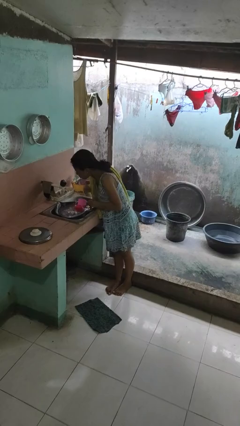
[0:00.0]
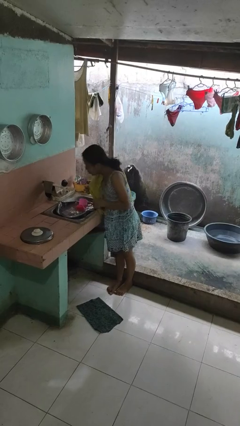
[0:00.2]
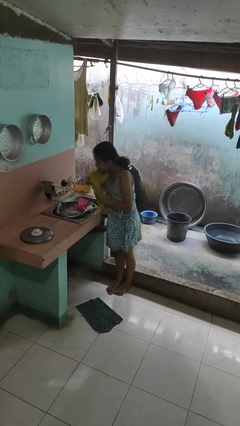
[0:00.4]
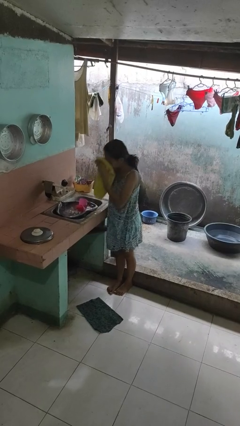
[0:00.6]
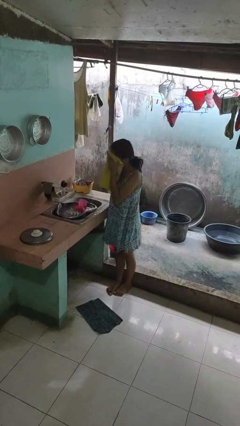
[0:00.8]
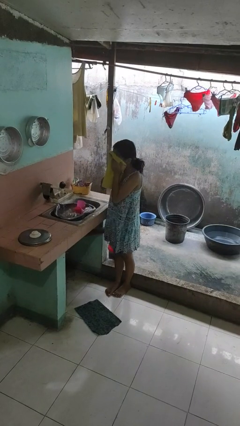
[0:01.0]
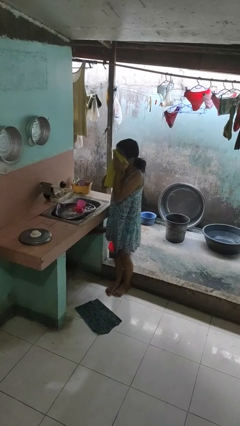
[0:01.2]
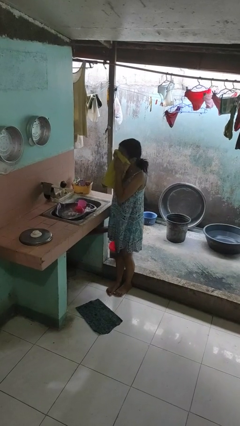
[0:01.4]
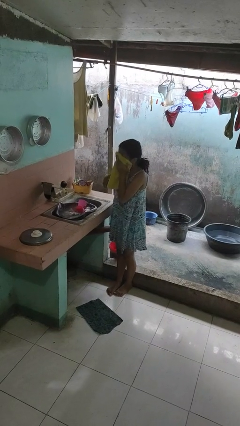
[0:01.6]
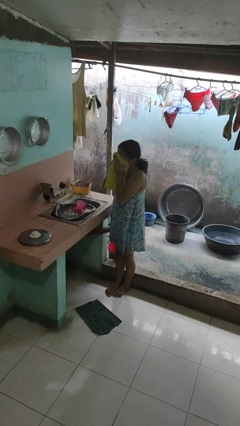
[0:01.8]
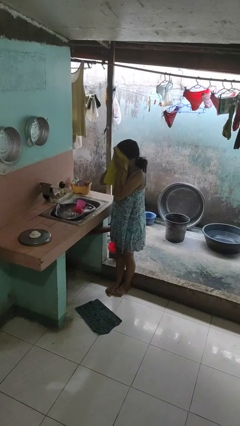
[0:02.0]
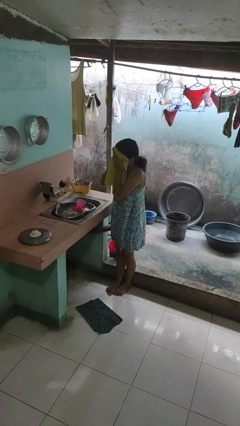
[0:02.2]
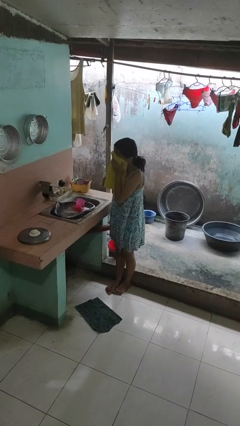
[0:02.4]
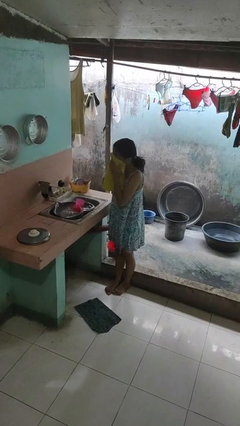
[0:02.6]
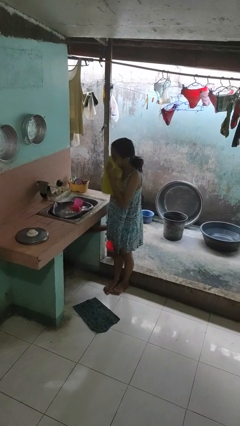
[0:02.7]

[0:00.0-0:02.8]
person dries face with towel

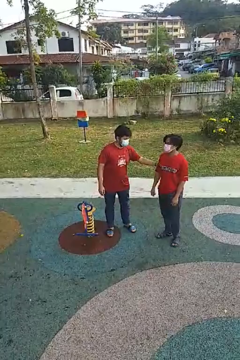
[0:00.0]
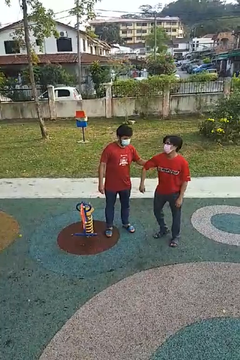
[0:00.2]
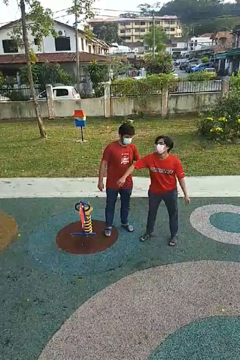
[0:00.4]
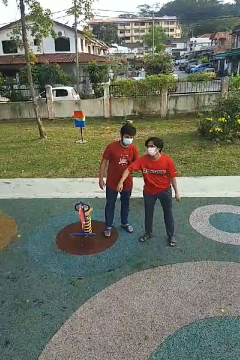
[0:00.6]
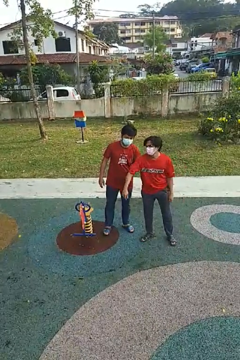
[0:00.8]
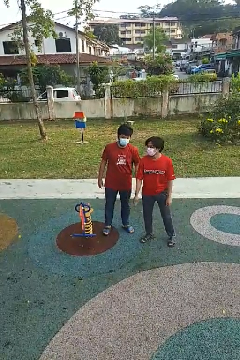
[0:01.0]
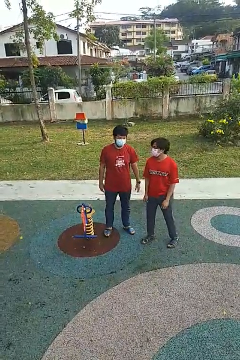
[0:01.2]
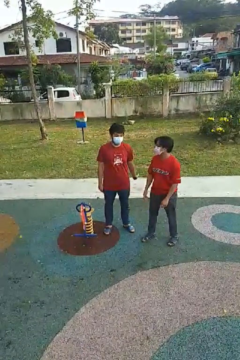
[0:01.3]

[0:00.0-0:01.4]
person grabs person by bicep

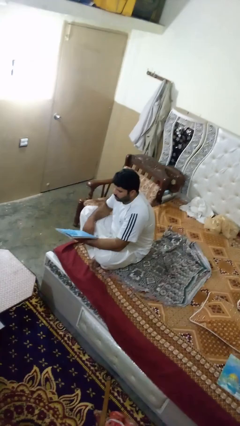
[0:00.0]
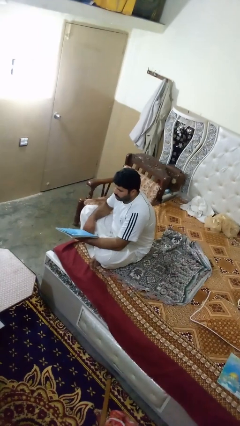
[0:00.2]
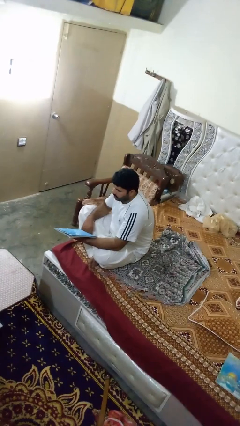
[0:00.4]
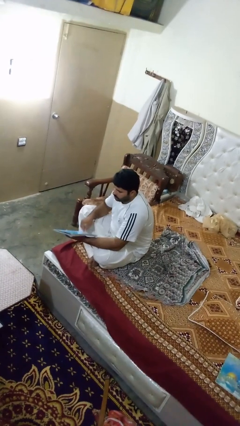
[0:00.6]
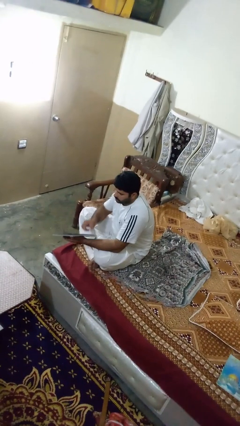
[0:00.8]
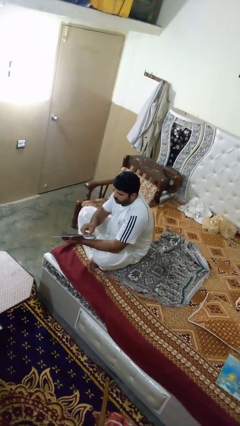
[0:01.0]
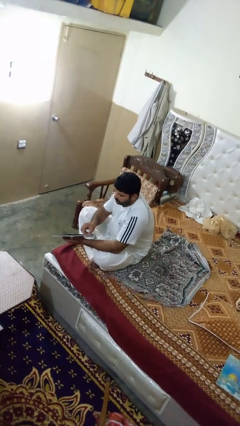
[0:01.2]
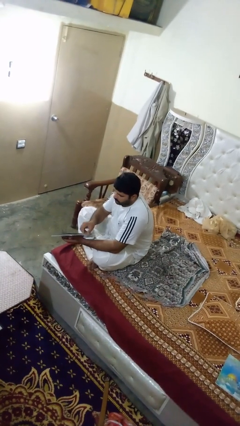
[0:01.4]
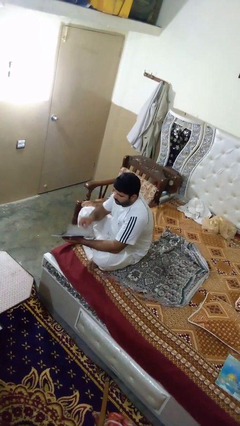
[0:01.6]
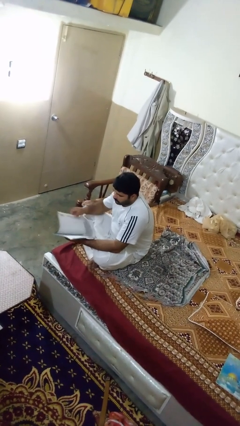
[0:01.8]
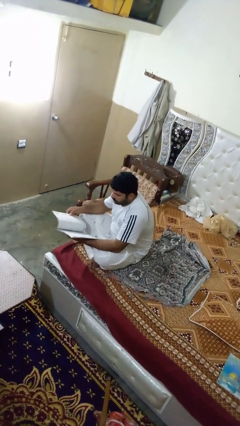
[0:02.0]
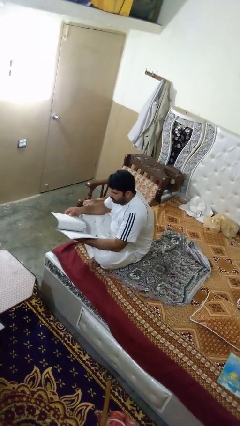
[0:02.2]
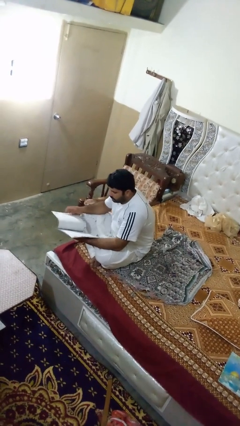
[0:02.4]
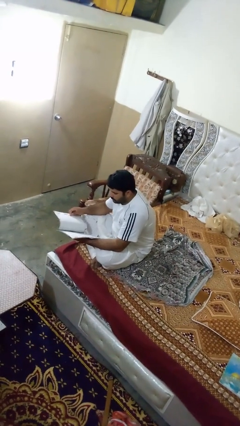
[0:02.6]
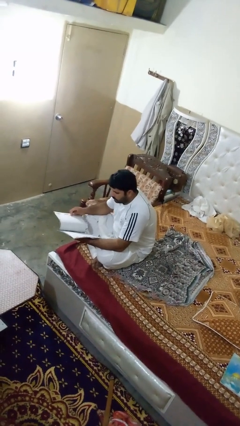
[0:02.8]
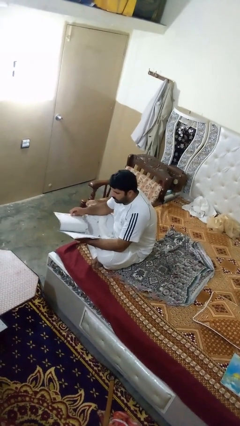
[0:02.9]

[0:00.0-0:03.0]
person reads magazine

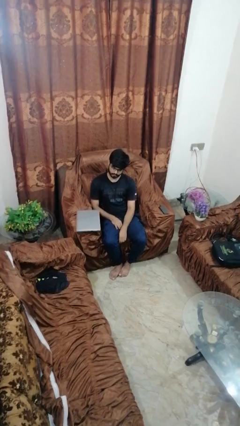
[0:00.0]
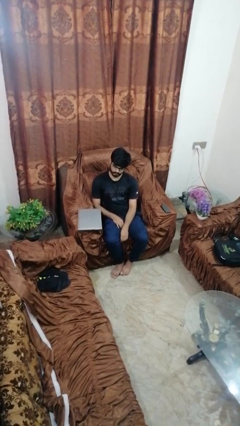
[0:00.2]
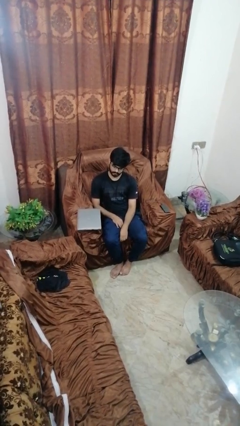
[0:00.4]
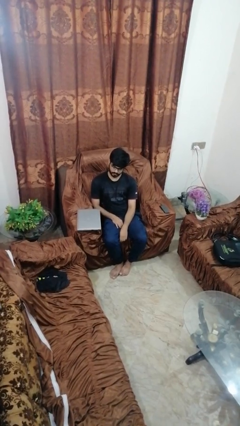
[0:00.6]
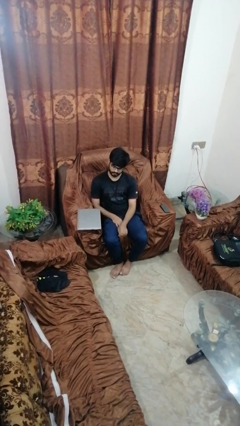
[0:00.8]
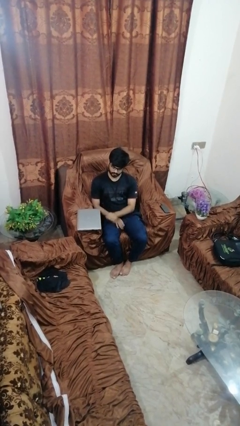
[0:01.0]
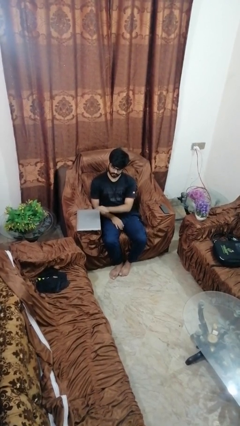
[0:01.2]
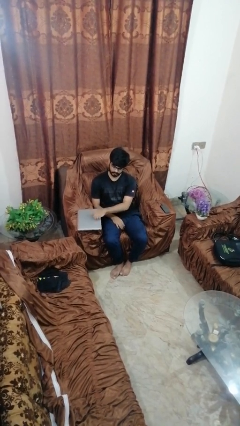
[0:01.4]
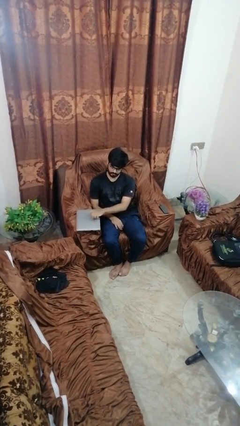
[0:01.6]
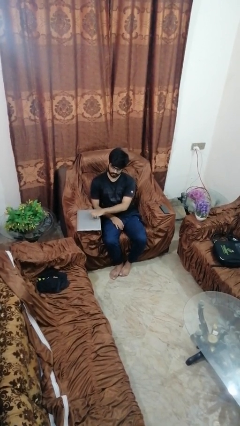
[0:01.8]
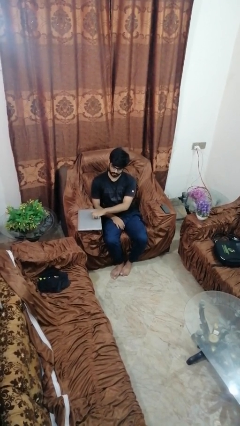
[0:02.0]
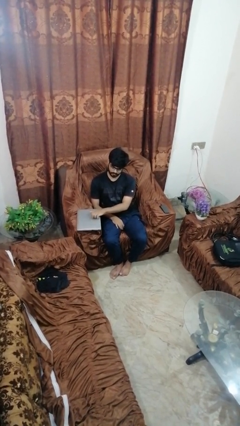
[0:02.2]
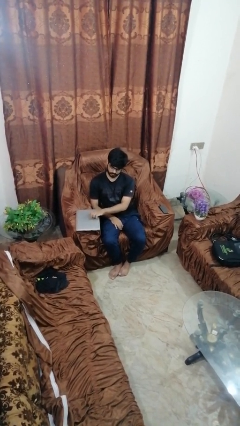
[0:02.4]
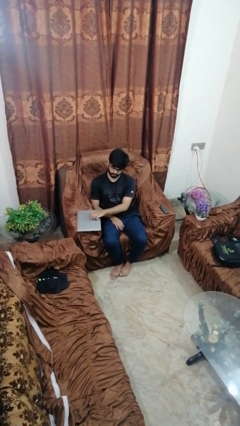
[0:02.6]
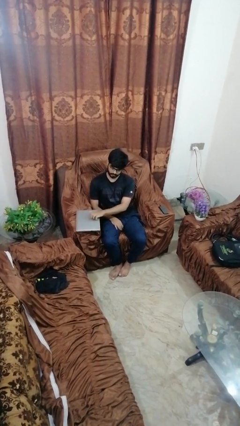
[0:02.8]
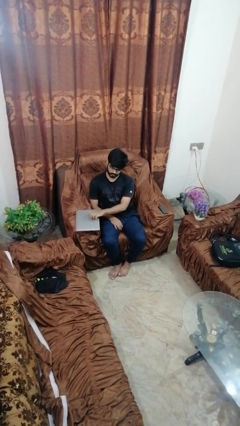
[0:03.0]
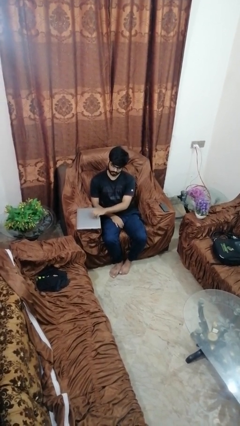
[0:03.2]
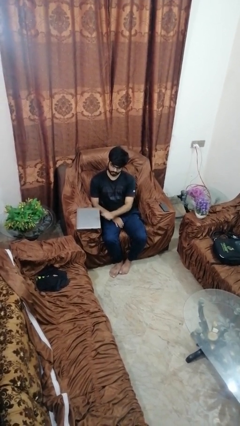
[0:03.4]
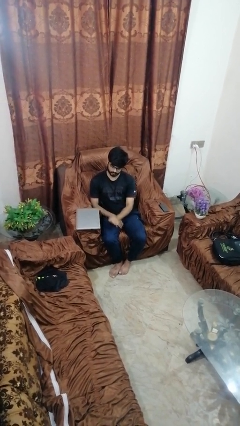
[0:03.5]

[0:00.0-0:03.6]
person taps object with finger

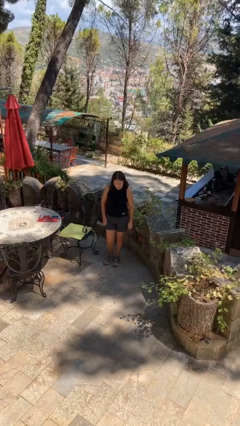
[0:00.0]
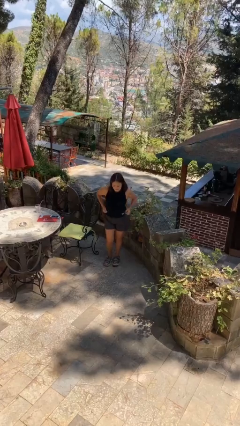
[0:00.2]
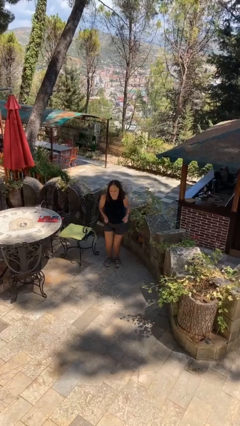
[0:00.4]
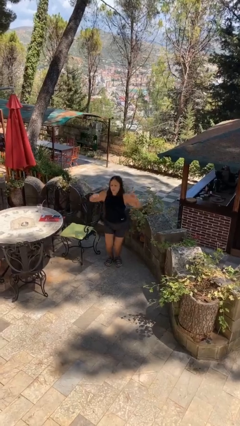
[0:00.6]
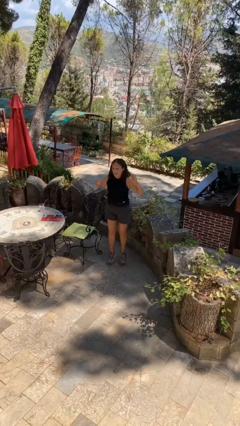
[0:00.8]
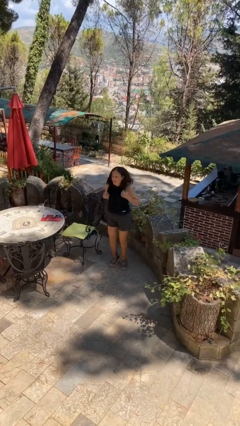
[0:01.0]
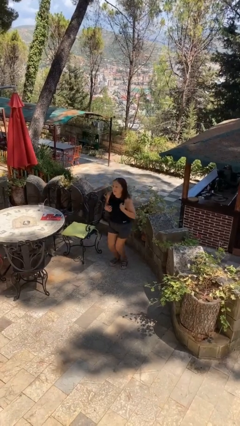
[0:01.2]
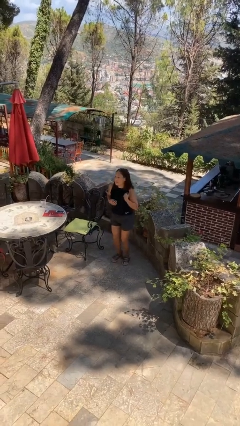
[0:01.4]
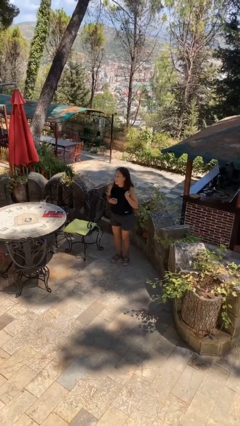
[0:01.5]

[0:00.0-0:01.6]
person jumps

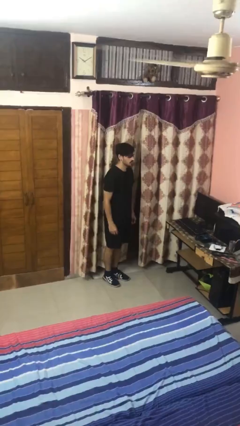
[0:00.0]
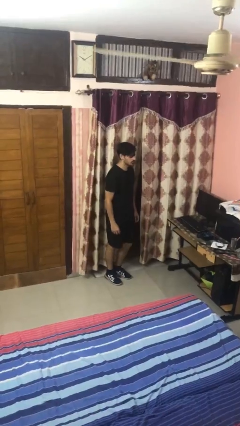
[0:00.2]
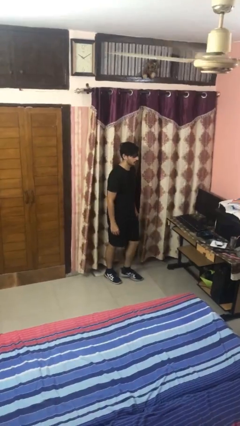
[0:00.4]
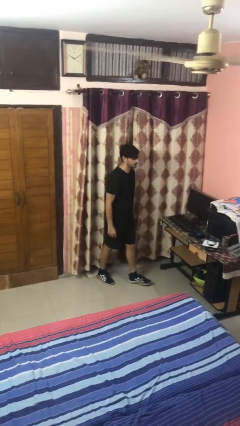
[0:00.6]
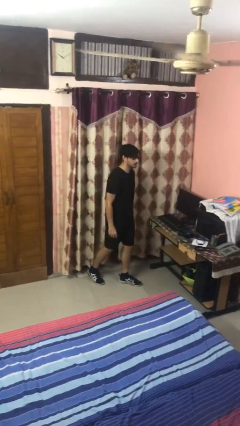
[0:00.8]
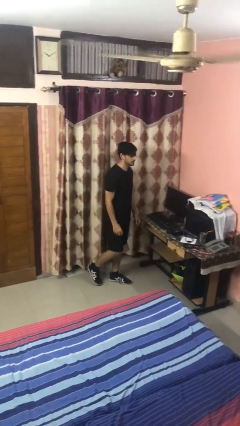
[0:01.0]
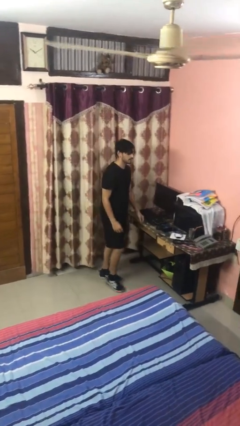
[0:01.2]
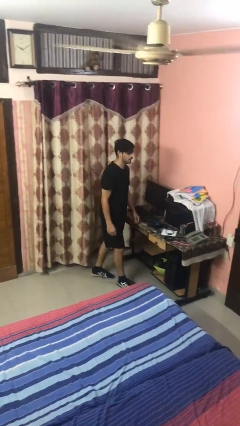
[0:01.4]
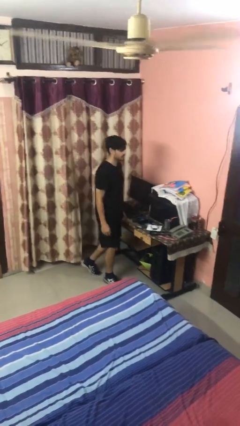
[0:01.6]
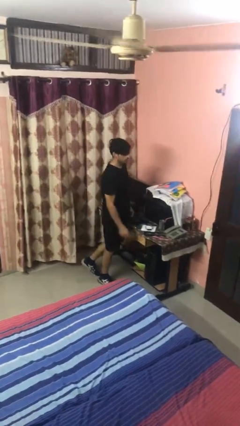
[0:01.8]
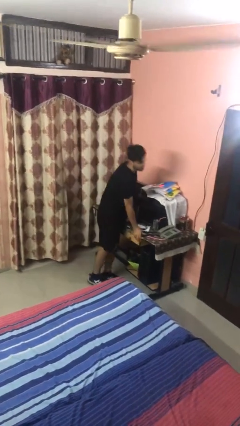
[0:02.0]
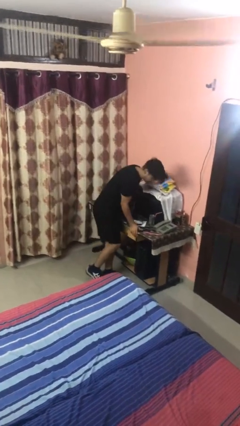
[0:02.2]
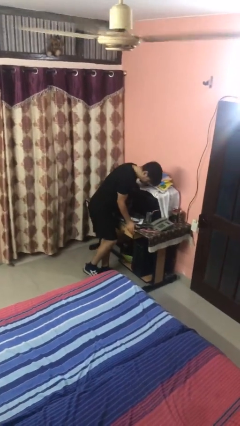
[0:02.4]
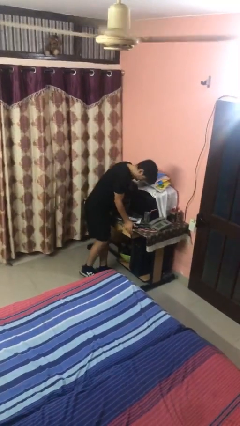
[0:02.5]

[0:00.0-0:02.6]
person bumps into table

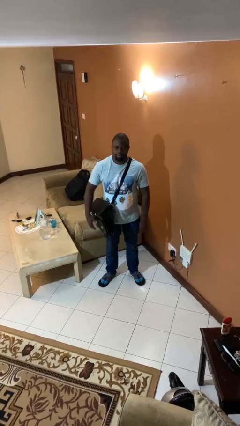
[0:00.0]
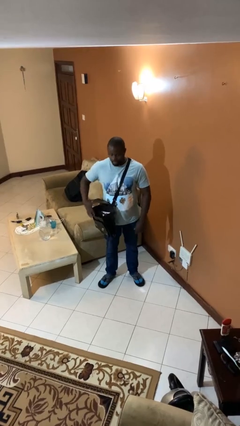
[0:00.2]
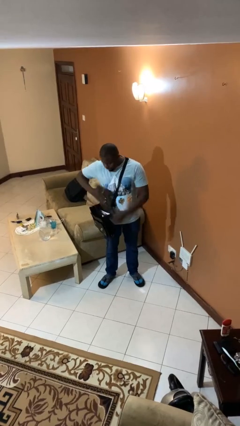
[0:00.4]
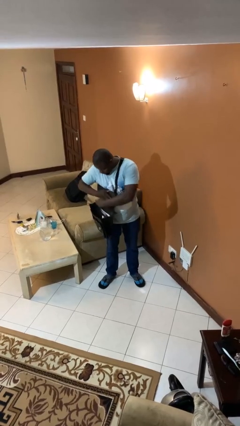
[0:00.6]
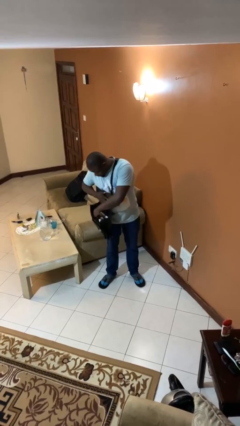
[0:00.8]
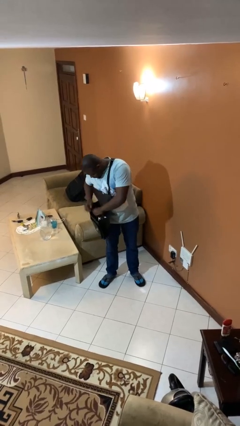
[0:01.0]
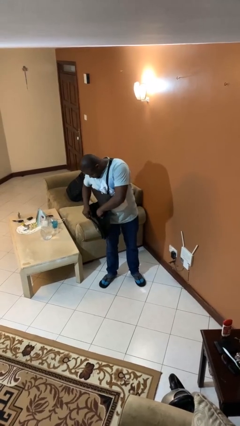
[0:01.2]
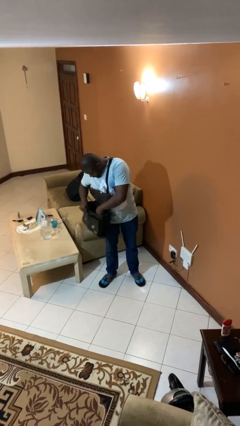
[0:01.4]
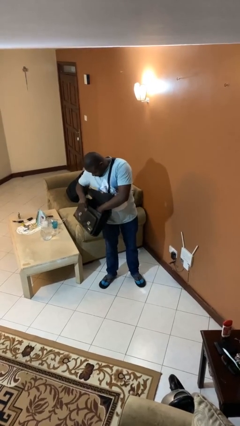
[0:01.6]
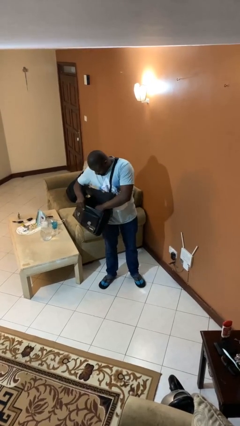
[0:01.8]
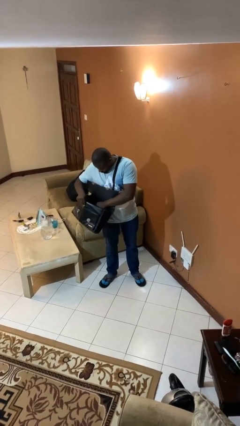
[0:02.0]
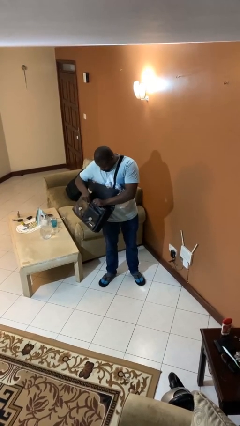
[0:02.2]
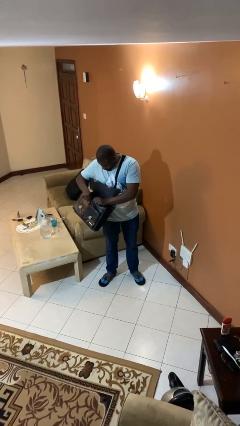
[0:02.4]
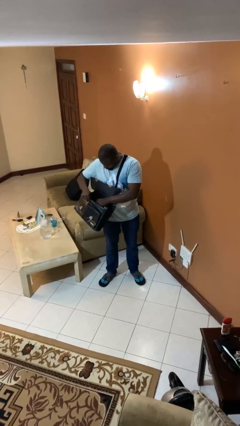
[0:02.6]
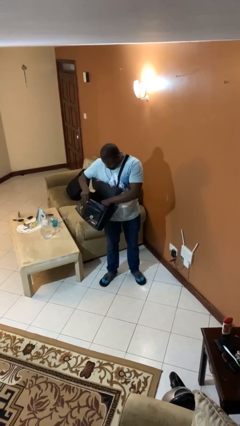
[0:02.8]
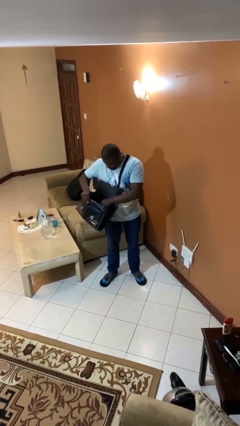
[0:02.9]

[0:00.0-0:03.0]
person searches in purse
